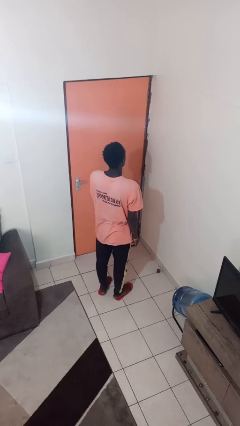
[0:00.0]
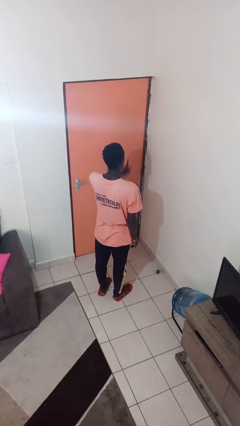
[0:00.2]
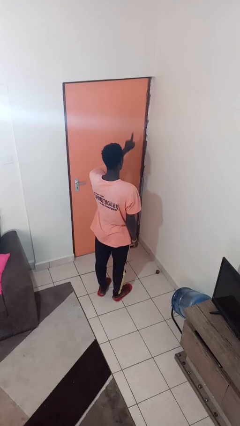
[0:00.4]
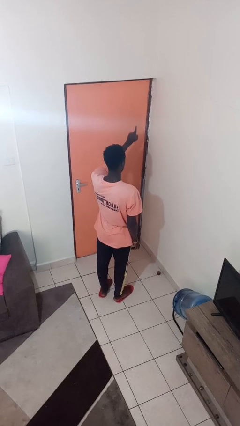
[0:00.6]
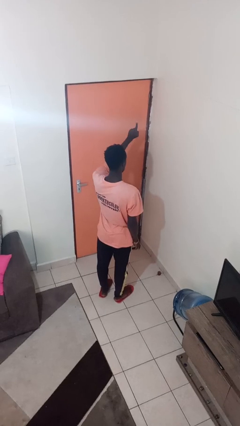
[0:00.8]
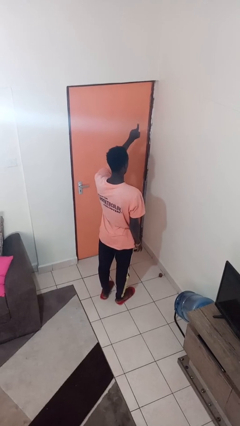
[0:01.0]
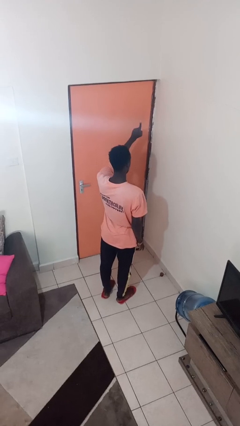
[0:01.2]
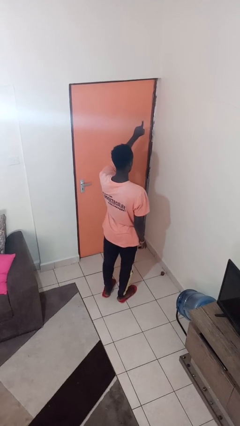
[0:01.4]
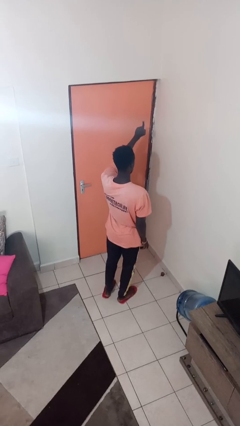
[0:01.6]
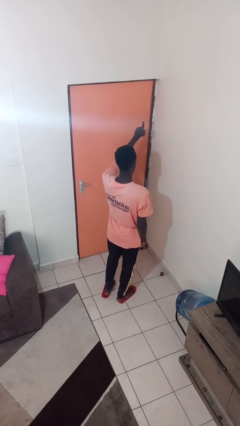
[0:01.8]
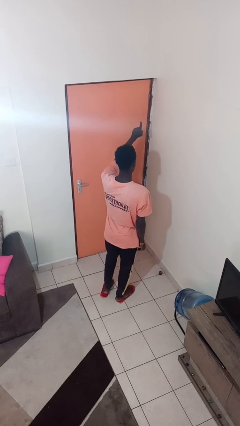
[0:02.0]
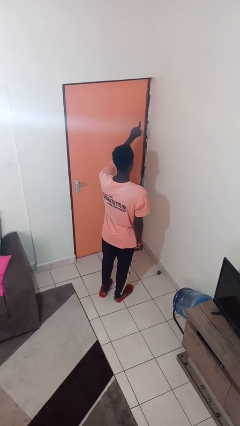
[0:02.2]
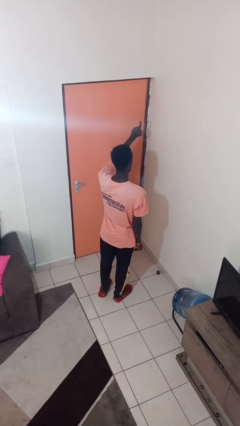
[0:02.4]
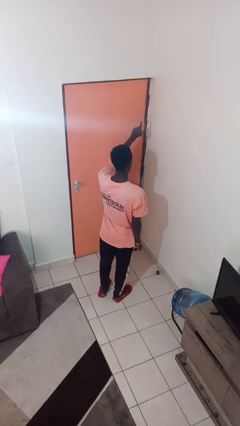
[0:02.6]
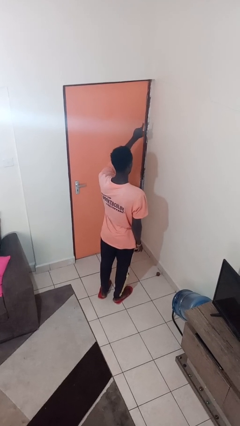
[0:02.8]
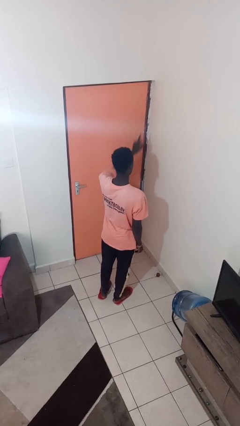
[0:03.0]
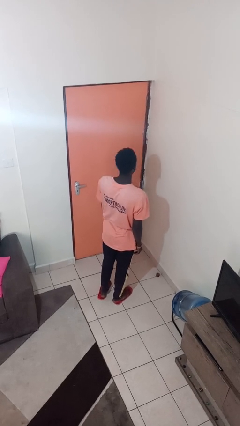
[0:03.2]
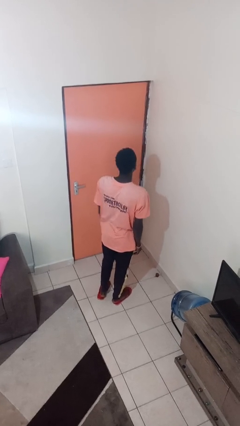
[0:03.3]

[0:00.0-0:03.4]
person gestures number one

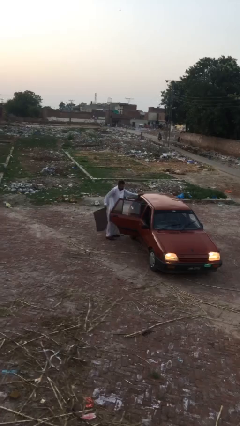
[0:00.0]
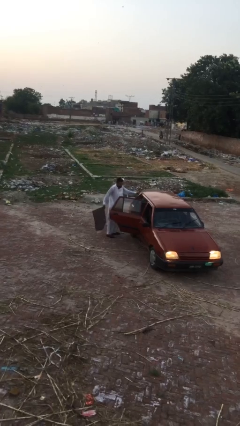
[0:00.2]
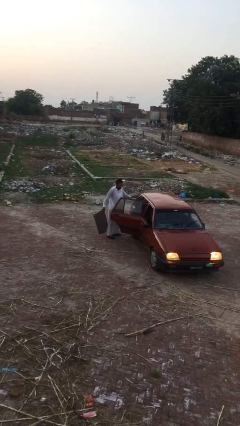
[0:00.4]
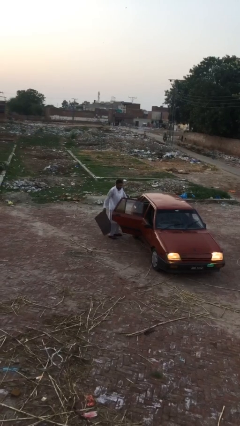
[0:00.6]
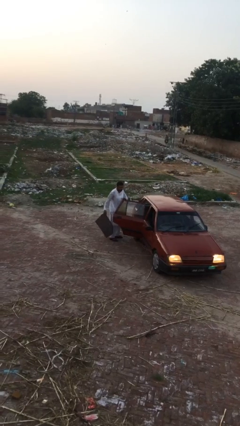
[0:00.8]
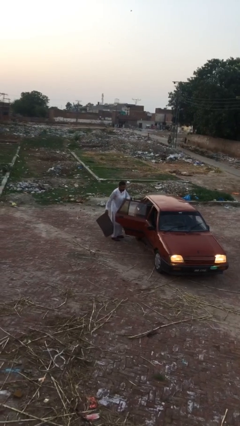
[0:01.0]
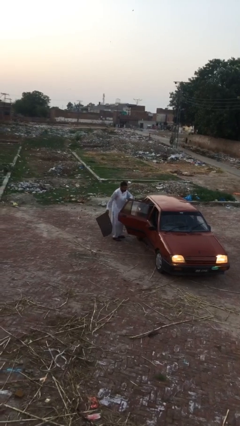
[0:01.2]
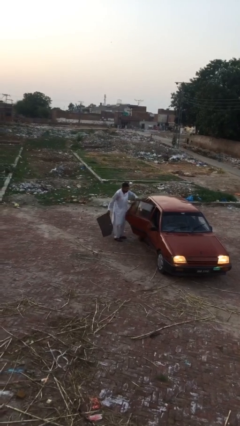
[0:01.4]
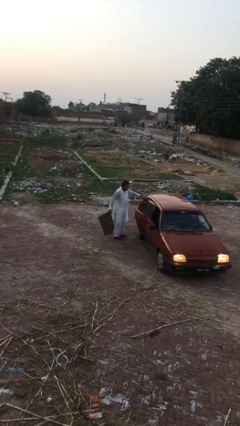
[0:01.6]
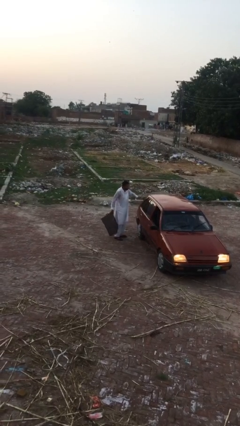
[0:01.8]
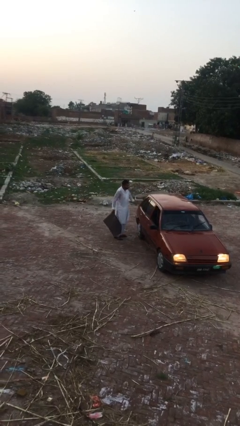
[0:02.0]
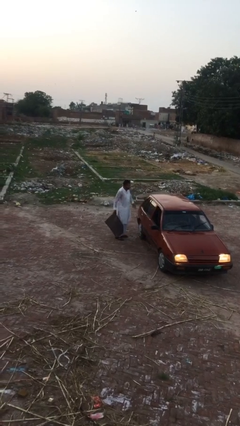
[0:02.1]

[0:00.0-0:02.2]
person closes car door

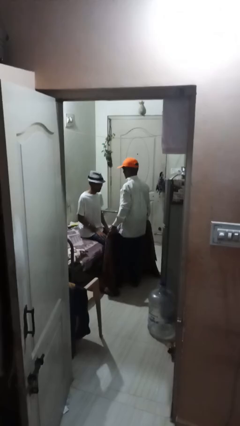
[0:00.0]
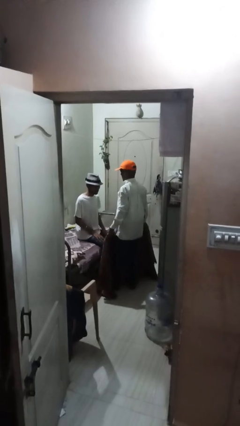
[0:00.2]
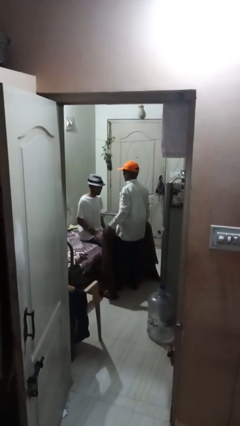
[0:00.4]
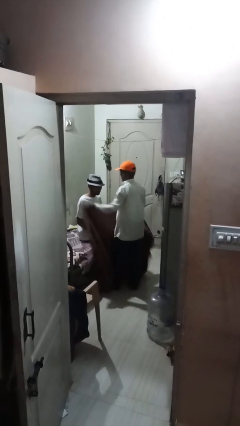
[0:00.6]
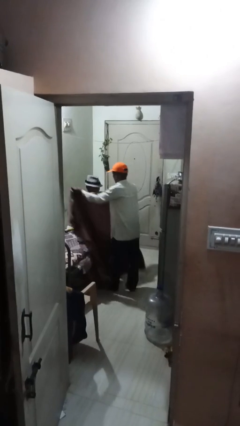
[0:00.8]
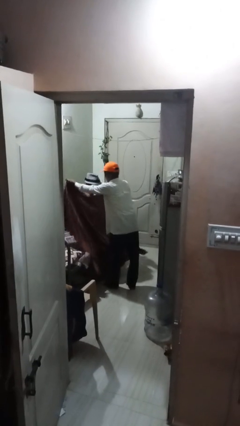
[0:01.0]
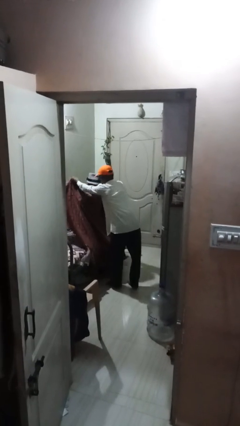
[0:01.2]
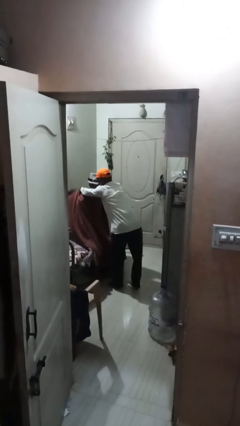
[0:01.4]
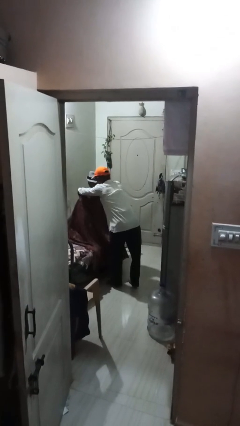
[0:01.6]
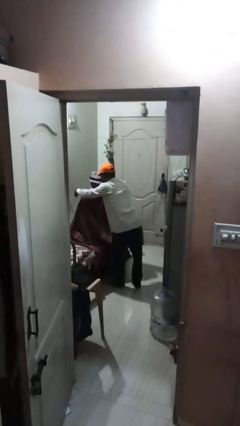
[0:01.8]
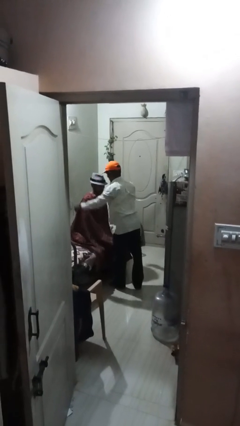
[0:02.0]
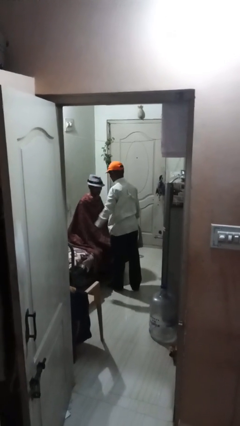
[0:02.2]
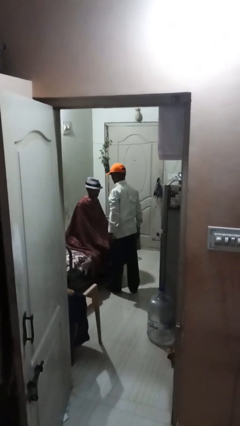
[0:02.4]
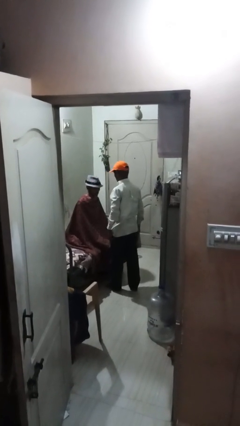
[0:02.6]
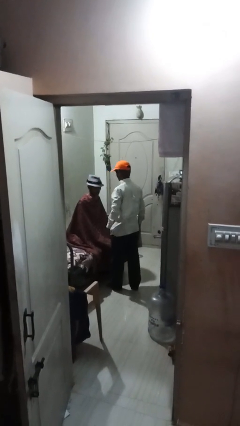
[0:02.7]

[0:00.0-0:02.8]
person uncovers friend with blanket

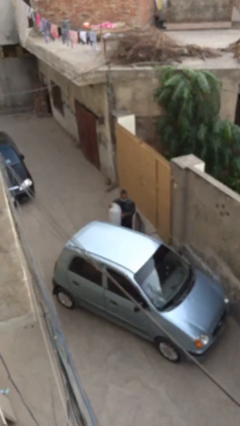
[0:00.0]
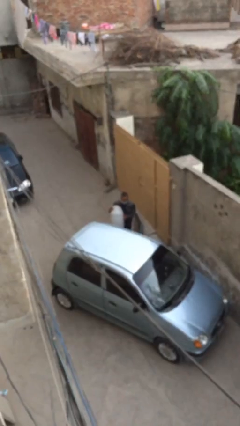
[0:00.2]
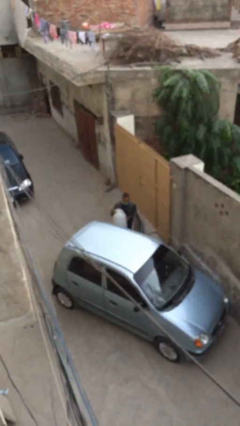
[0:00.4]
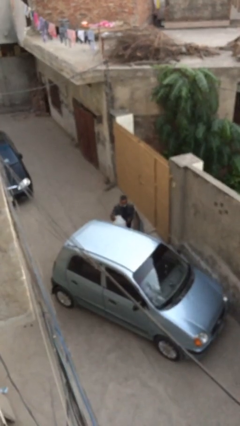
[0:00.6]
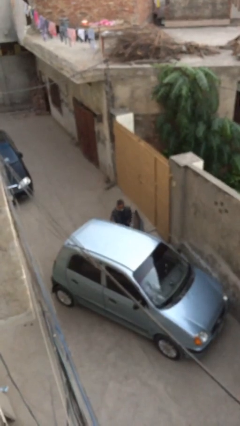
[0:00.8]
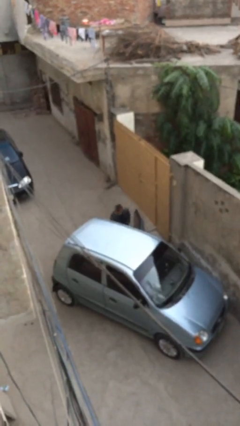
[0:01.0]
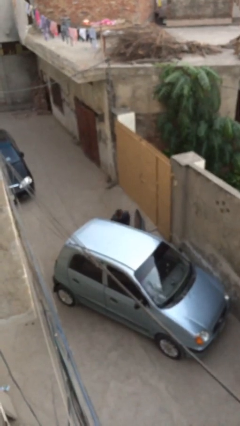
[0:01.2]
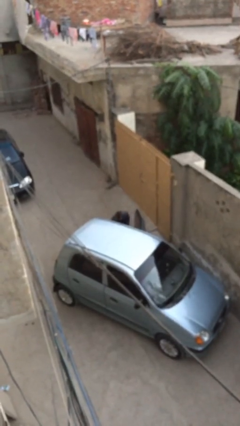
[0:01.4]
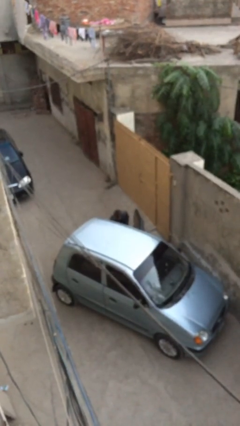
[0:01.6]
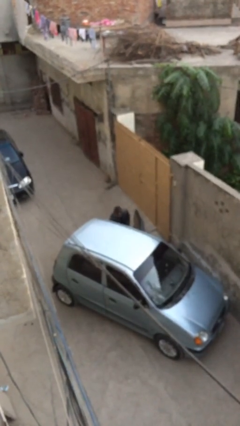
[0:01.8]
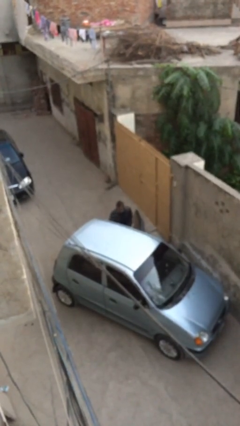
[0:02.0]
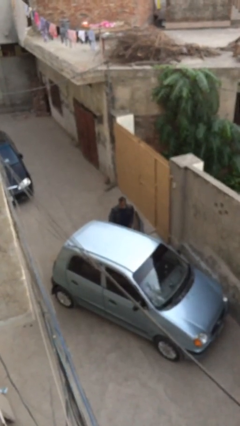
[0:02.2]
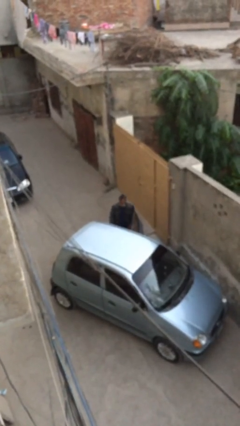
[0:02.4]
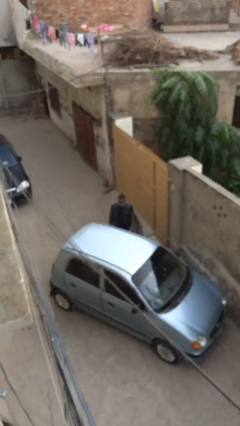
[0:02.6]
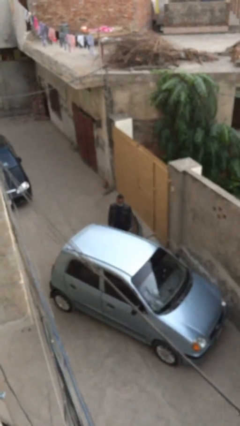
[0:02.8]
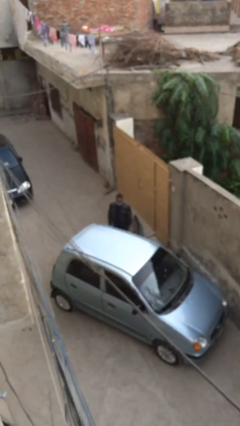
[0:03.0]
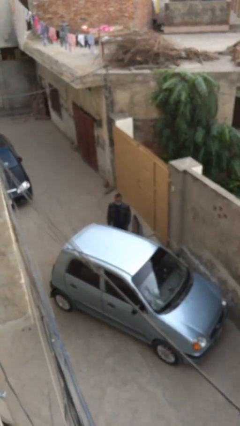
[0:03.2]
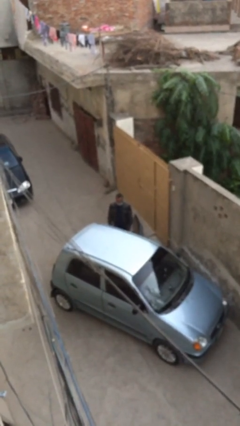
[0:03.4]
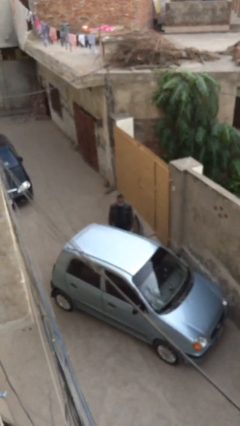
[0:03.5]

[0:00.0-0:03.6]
person loads car

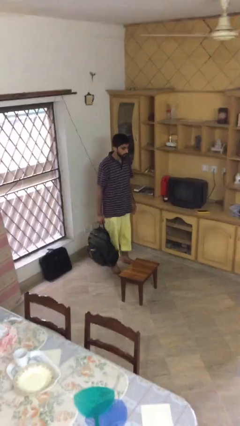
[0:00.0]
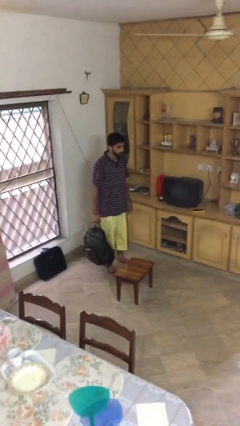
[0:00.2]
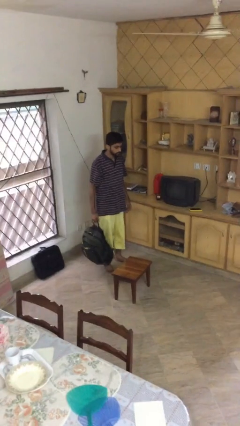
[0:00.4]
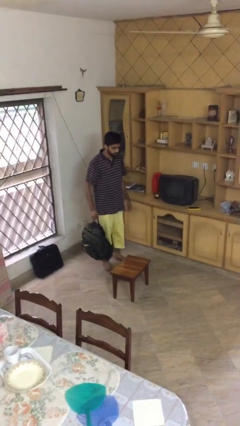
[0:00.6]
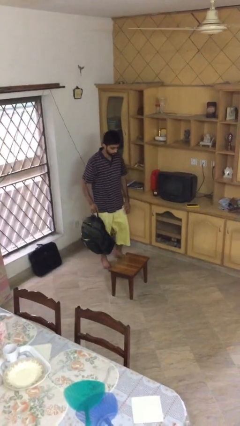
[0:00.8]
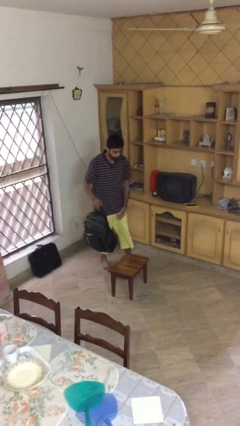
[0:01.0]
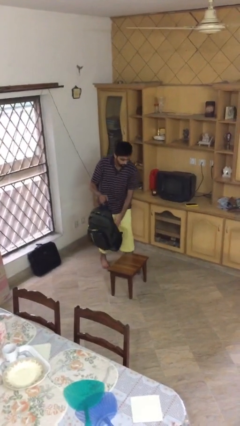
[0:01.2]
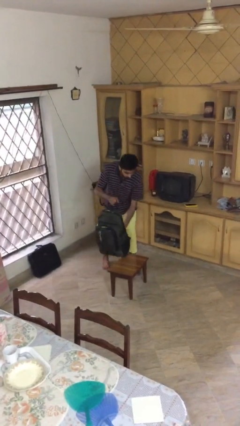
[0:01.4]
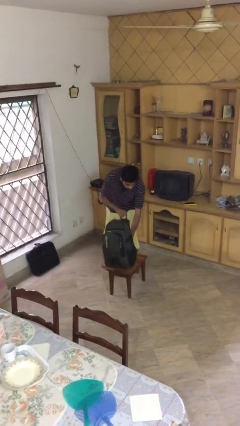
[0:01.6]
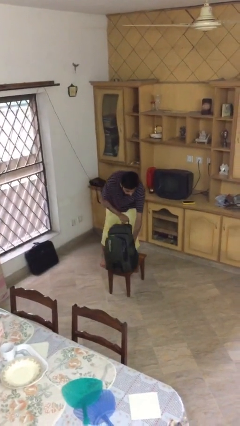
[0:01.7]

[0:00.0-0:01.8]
person puts down object on table

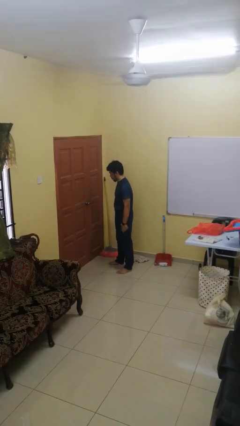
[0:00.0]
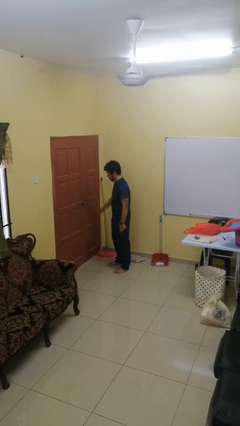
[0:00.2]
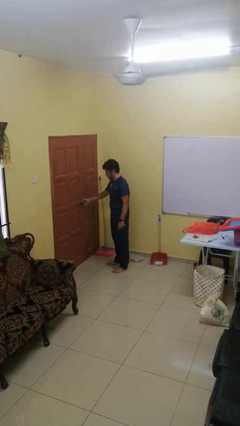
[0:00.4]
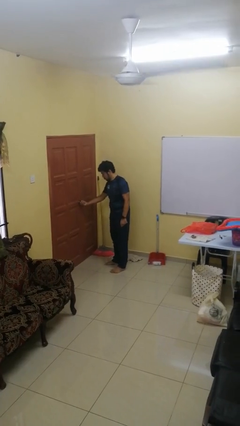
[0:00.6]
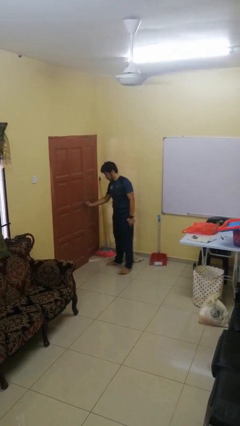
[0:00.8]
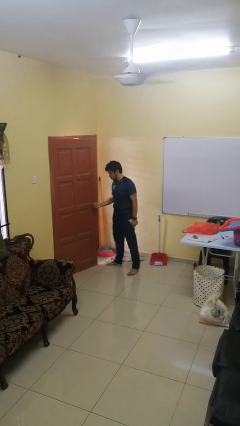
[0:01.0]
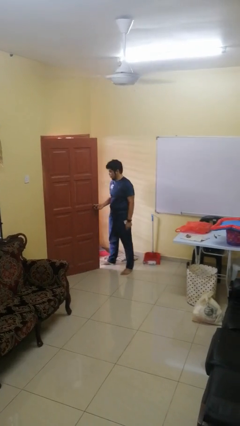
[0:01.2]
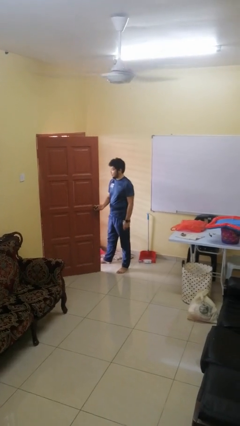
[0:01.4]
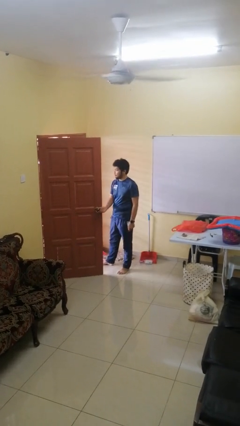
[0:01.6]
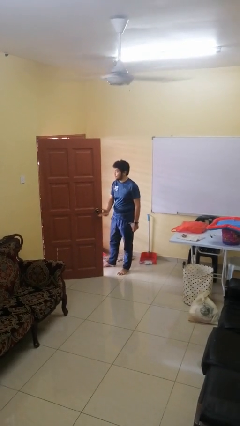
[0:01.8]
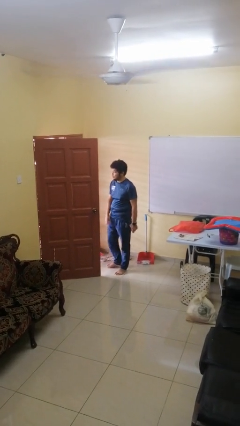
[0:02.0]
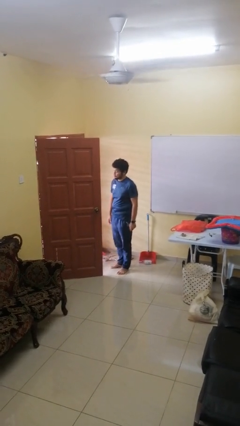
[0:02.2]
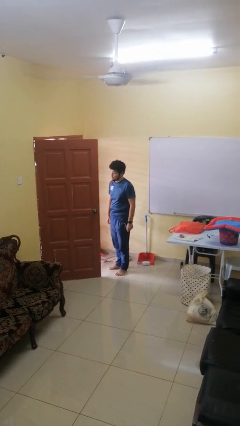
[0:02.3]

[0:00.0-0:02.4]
person opens facility door

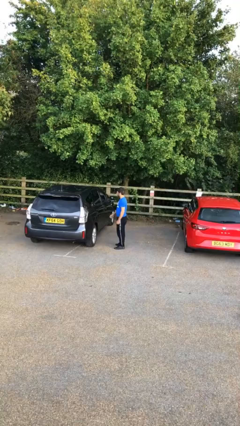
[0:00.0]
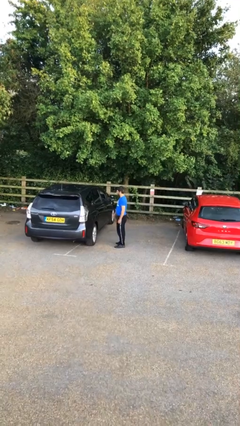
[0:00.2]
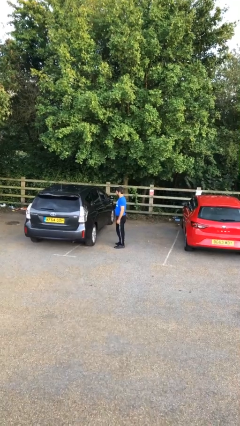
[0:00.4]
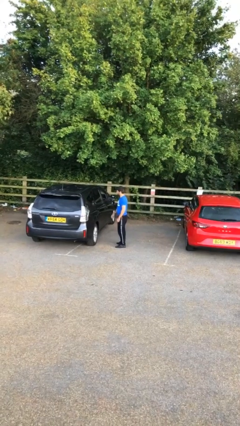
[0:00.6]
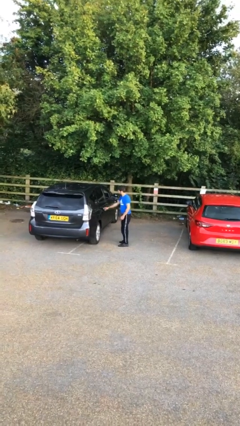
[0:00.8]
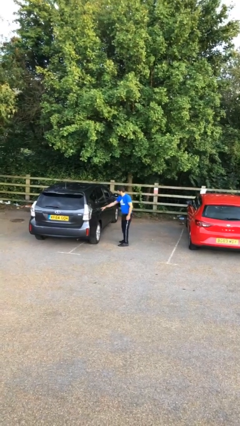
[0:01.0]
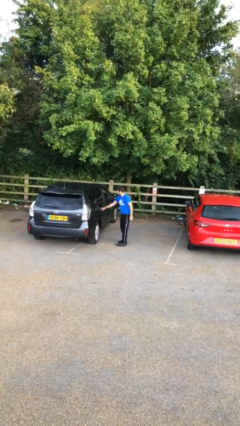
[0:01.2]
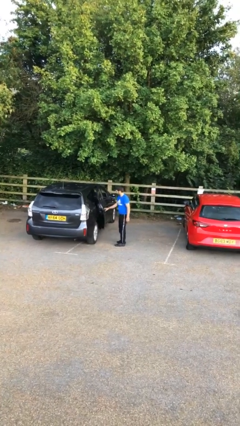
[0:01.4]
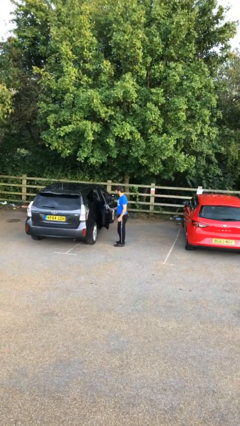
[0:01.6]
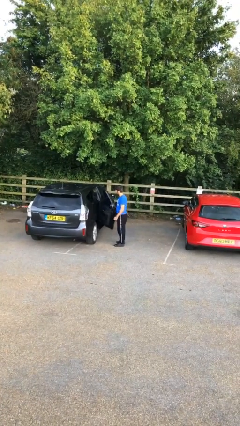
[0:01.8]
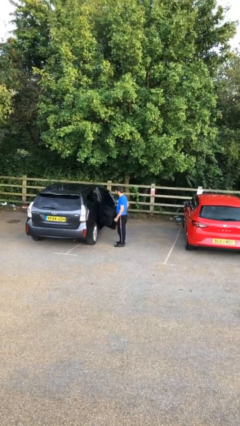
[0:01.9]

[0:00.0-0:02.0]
person opens car door
